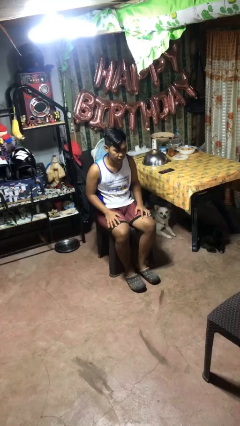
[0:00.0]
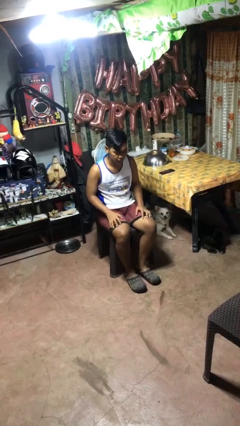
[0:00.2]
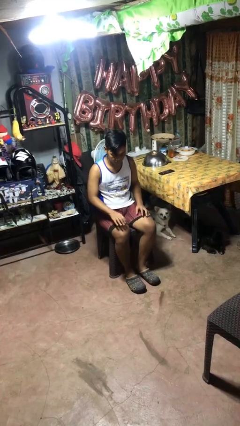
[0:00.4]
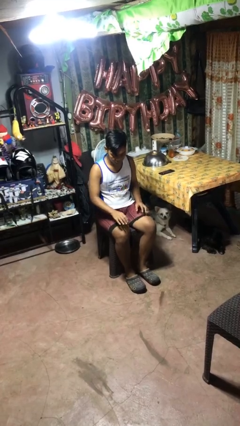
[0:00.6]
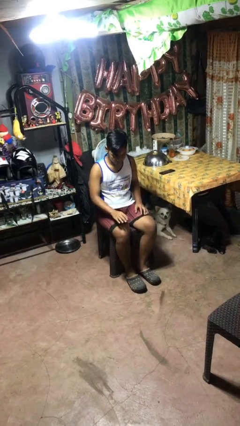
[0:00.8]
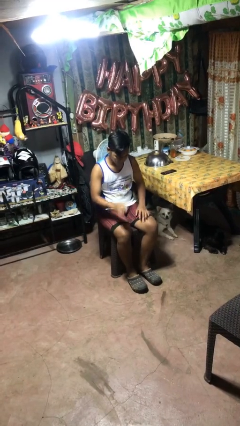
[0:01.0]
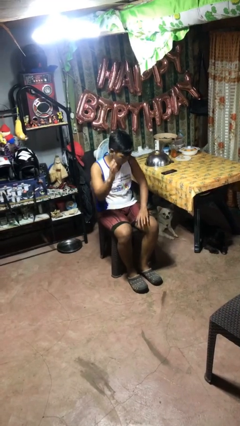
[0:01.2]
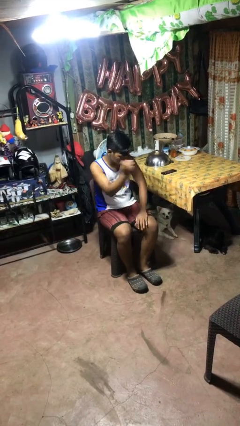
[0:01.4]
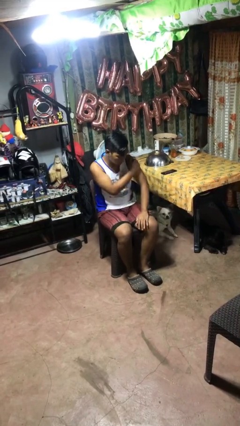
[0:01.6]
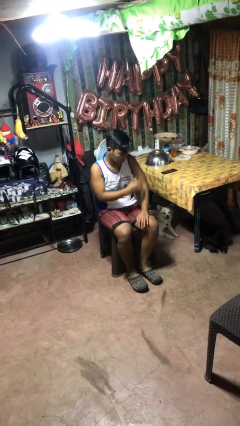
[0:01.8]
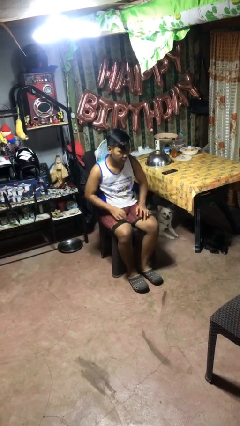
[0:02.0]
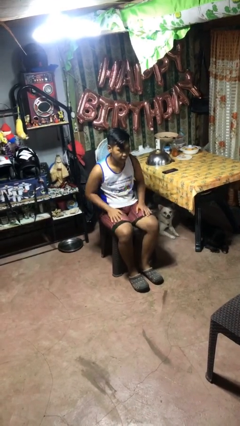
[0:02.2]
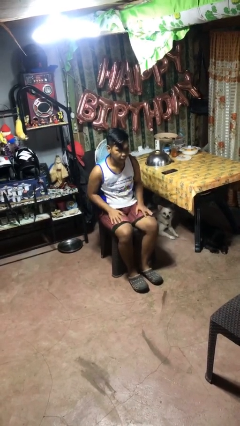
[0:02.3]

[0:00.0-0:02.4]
person swats bug

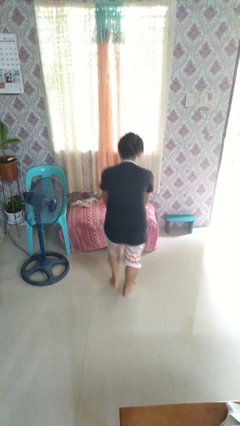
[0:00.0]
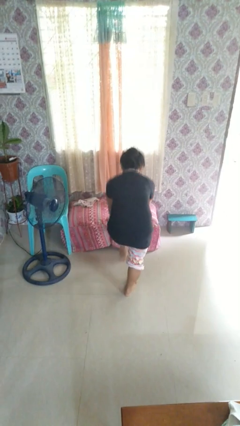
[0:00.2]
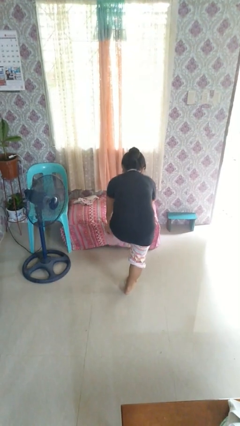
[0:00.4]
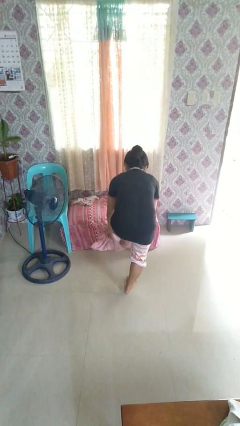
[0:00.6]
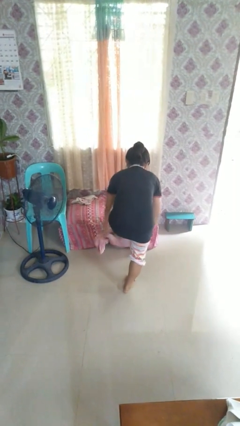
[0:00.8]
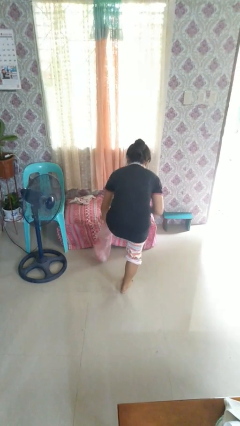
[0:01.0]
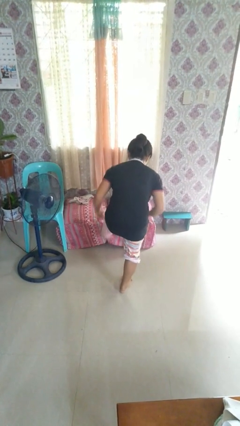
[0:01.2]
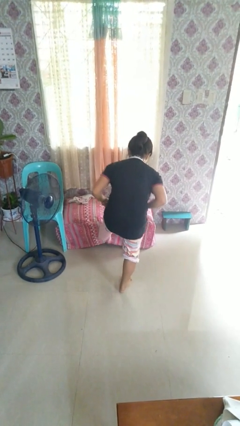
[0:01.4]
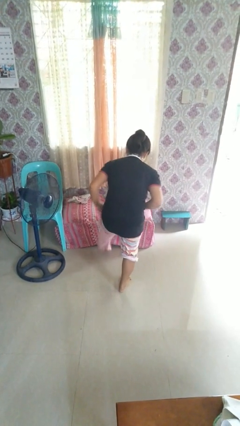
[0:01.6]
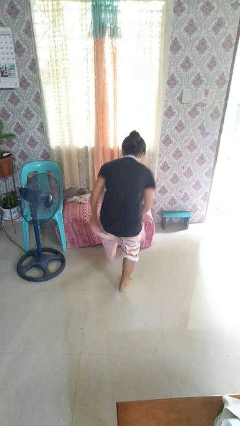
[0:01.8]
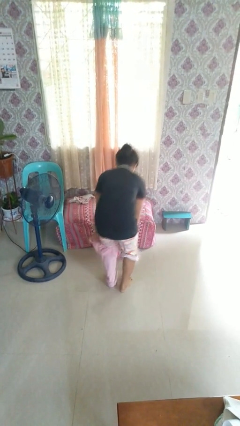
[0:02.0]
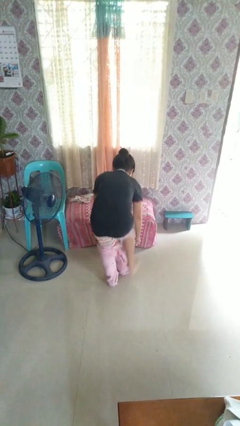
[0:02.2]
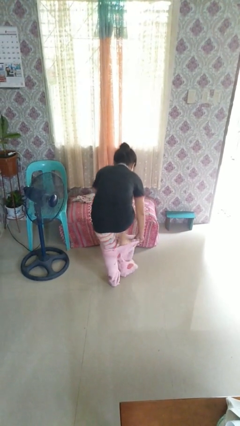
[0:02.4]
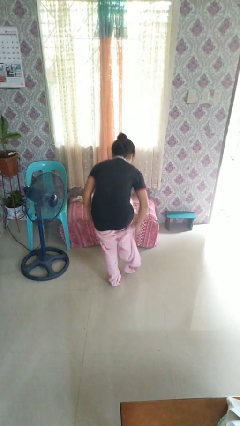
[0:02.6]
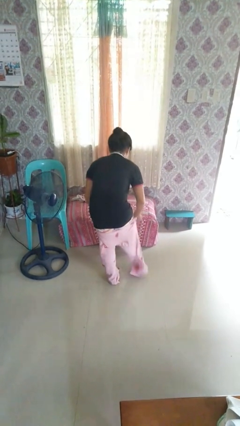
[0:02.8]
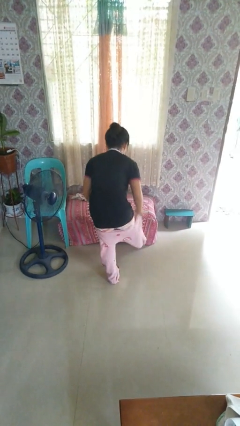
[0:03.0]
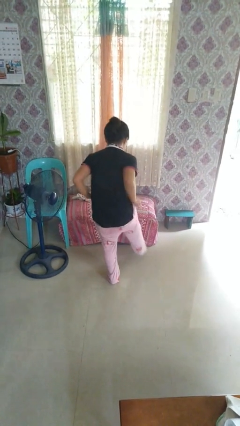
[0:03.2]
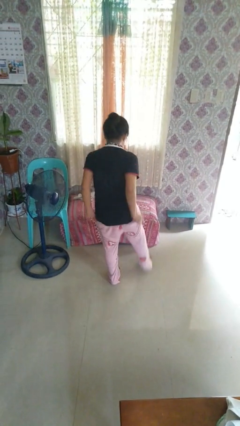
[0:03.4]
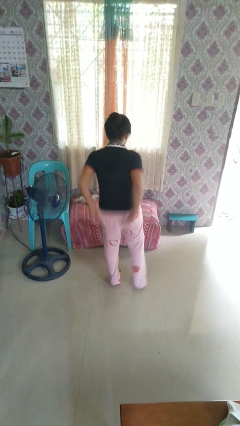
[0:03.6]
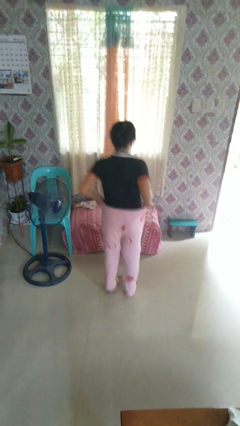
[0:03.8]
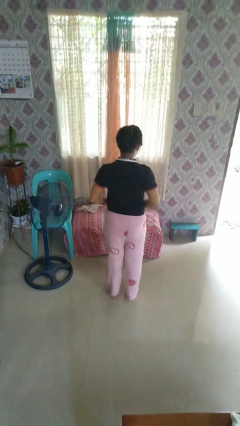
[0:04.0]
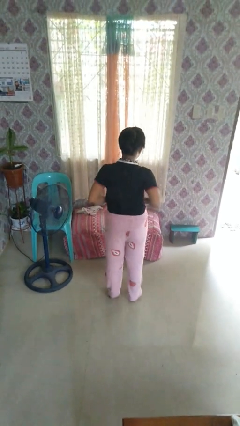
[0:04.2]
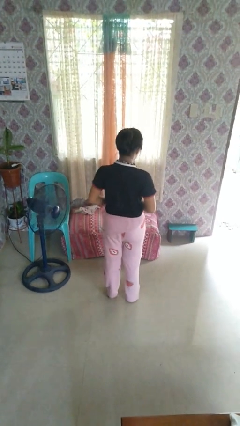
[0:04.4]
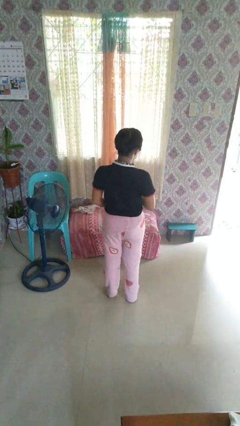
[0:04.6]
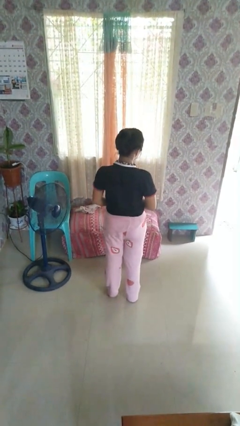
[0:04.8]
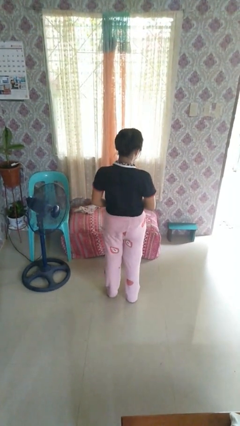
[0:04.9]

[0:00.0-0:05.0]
person puts on pants

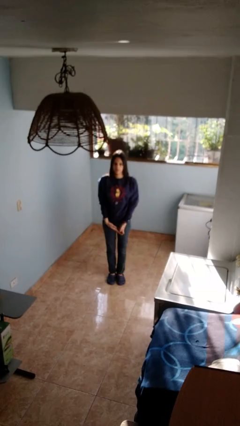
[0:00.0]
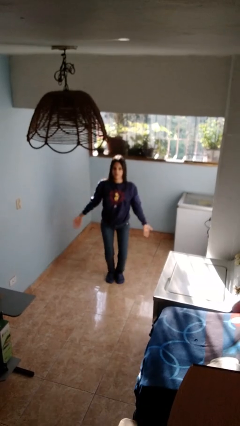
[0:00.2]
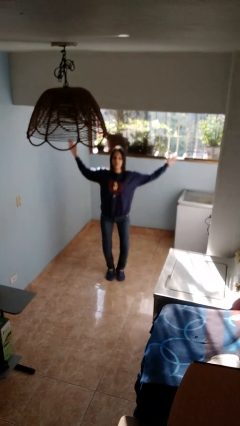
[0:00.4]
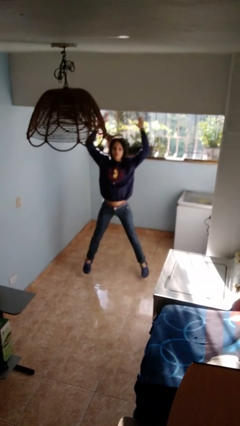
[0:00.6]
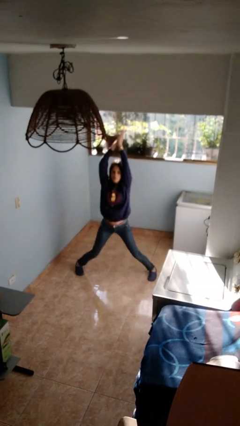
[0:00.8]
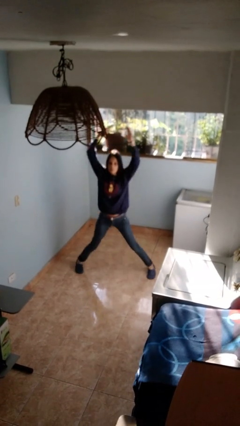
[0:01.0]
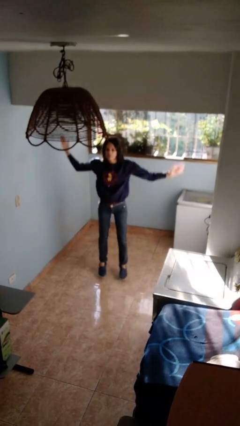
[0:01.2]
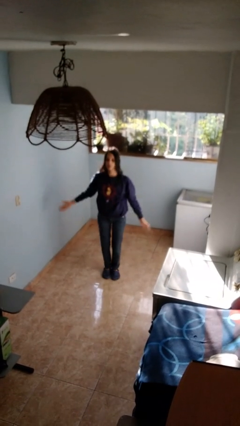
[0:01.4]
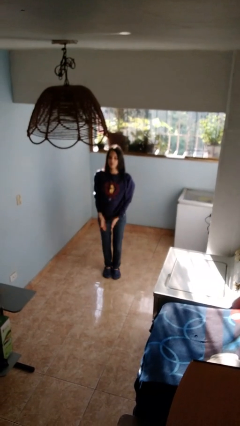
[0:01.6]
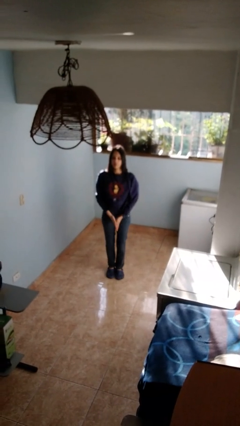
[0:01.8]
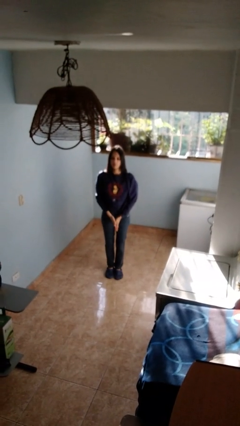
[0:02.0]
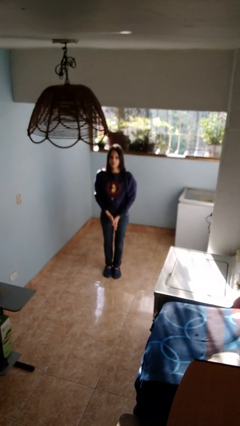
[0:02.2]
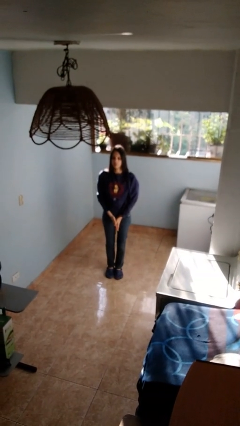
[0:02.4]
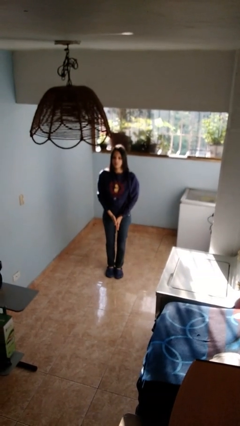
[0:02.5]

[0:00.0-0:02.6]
person exercises with jumping jacks

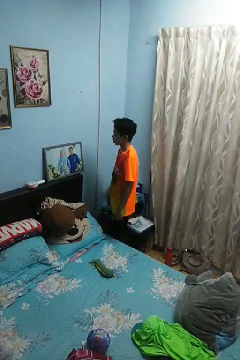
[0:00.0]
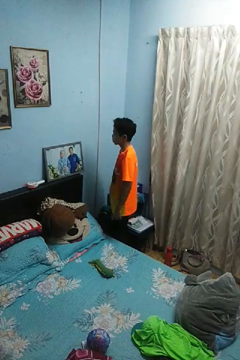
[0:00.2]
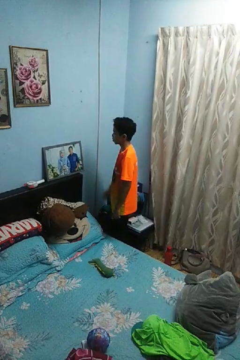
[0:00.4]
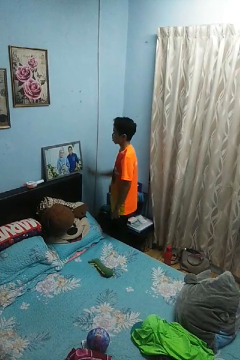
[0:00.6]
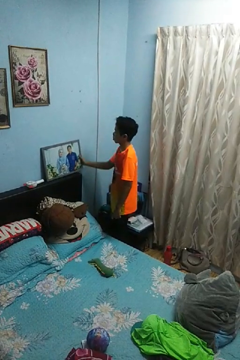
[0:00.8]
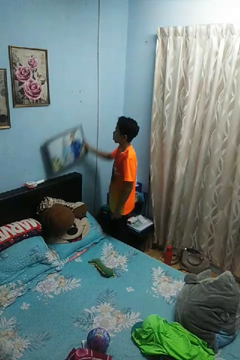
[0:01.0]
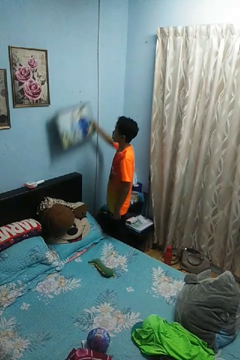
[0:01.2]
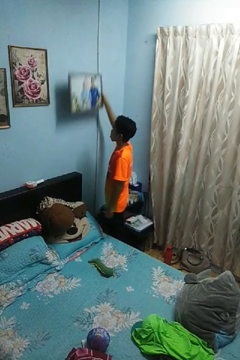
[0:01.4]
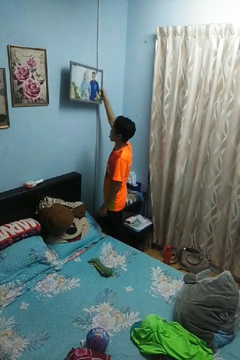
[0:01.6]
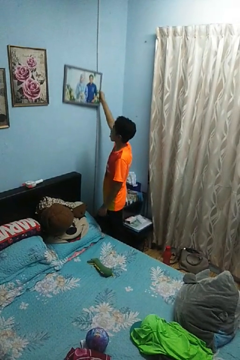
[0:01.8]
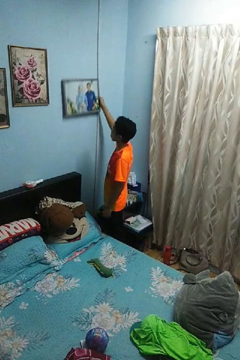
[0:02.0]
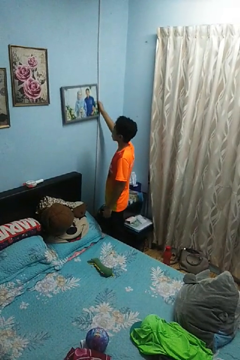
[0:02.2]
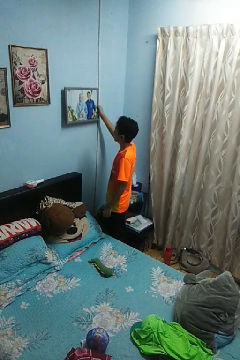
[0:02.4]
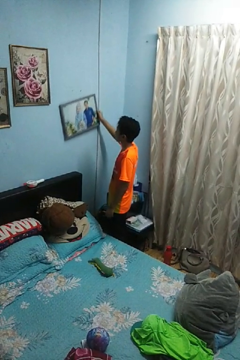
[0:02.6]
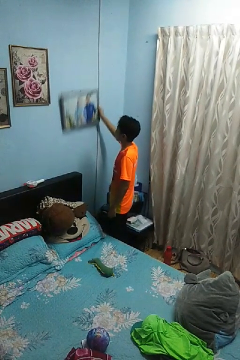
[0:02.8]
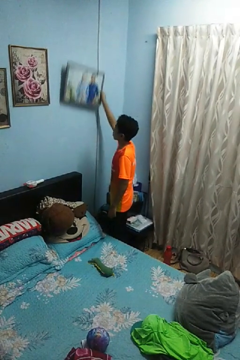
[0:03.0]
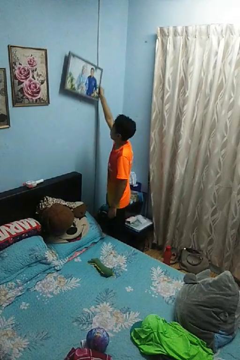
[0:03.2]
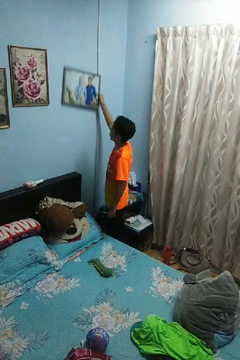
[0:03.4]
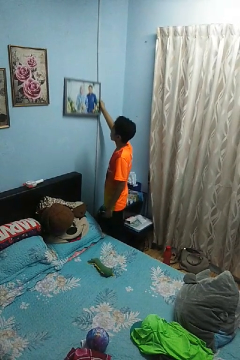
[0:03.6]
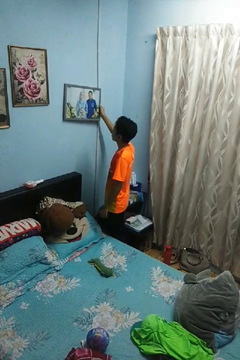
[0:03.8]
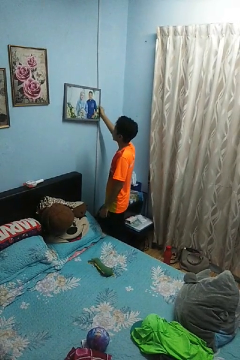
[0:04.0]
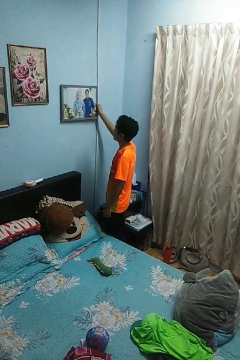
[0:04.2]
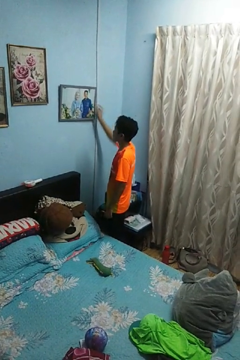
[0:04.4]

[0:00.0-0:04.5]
person puts up picture frame

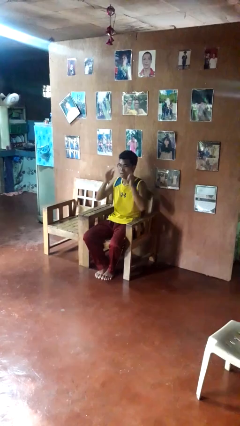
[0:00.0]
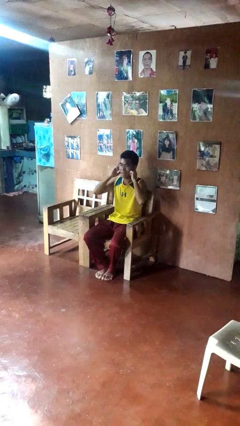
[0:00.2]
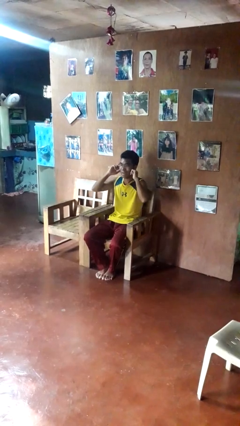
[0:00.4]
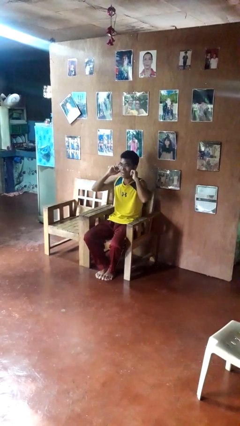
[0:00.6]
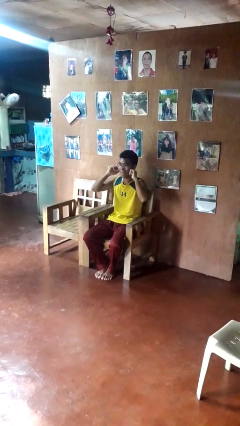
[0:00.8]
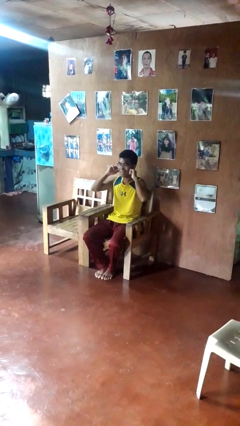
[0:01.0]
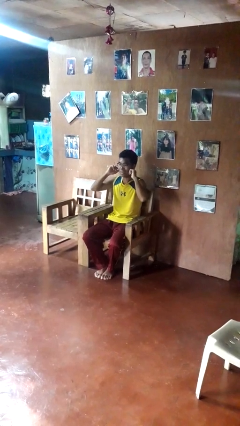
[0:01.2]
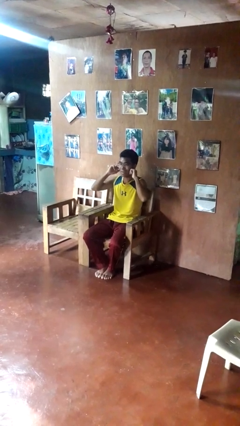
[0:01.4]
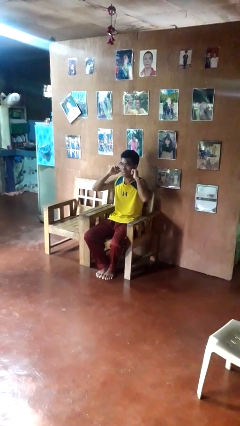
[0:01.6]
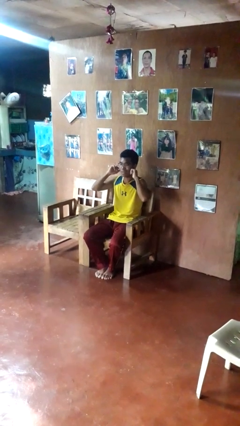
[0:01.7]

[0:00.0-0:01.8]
person puts fingers in ear

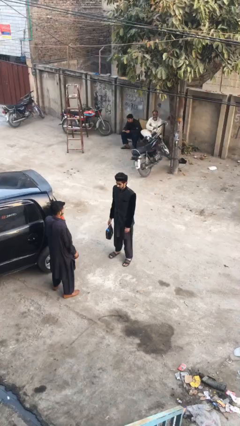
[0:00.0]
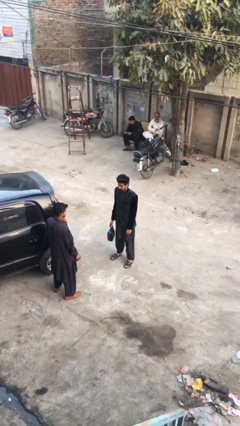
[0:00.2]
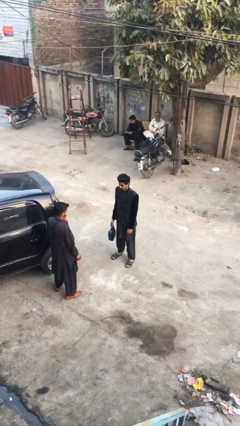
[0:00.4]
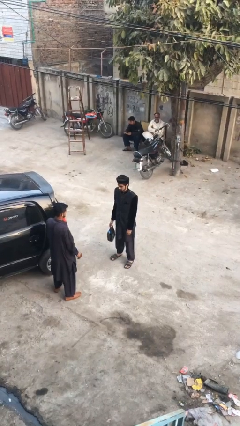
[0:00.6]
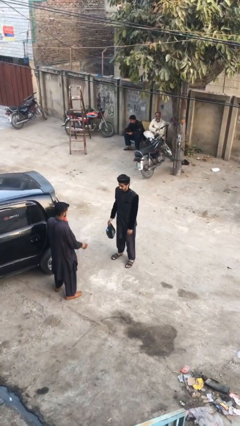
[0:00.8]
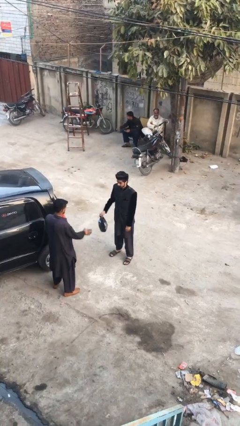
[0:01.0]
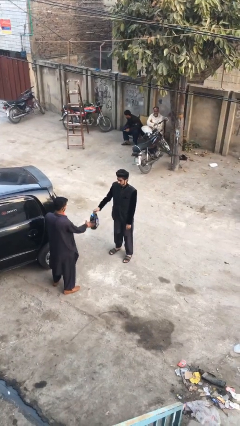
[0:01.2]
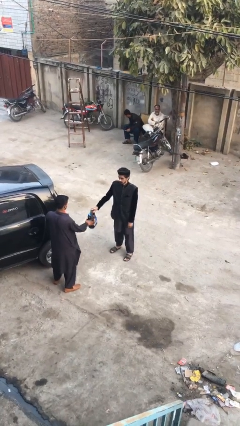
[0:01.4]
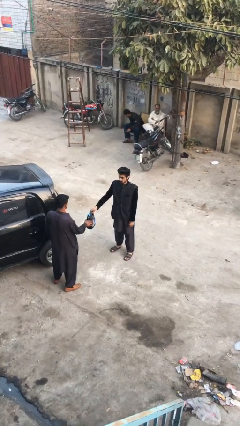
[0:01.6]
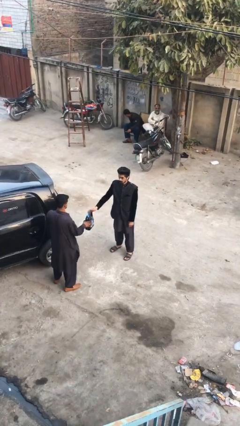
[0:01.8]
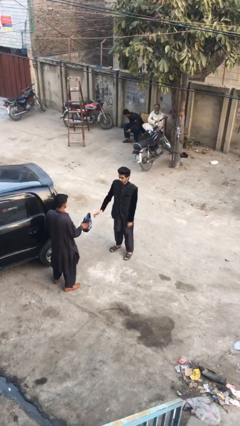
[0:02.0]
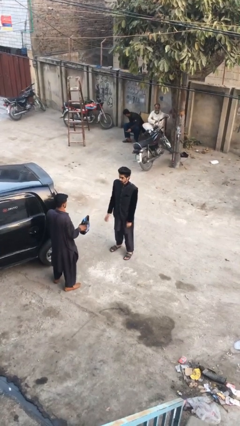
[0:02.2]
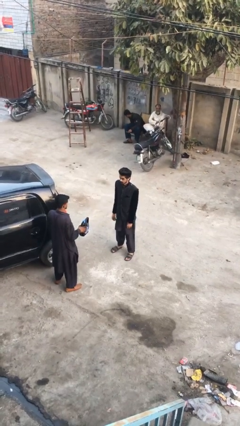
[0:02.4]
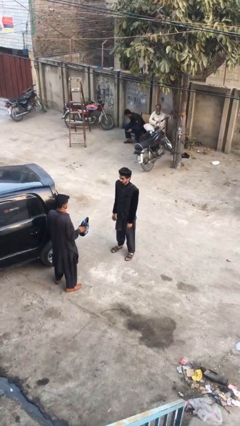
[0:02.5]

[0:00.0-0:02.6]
person transfers object to person
